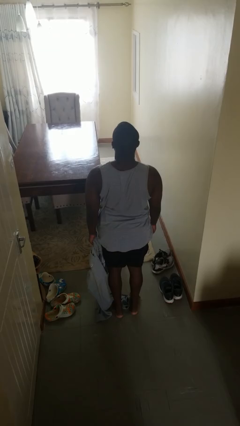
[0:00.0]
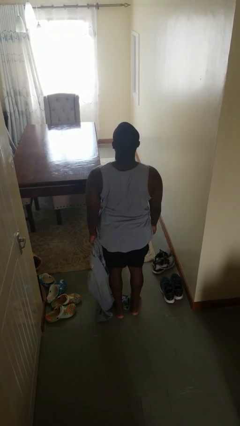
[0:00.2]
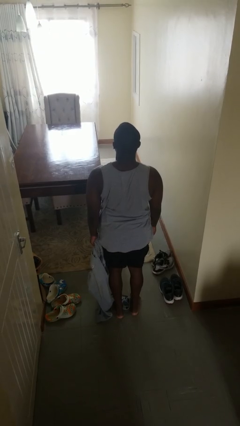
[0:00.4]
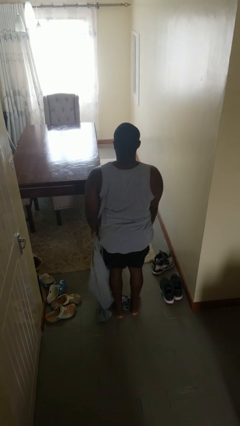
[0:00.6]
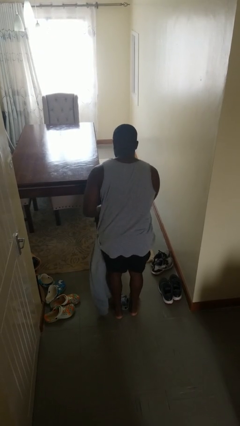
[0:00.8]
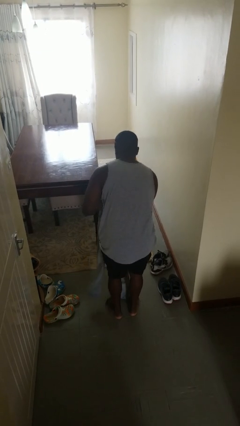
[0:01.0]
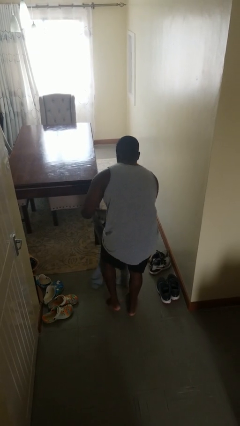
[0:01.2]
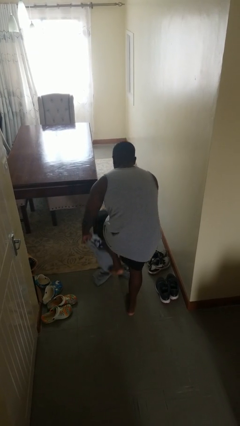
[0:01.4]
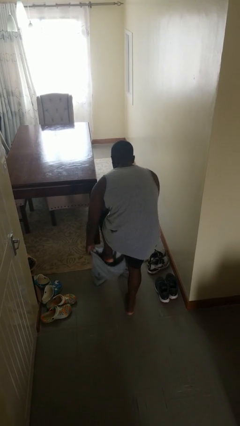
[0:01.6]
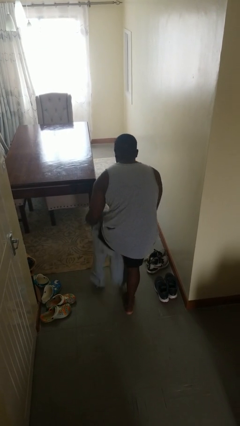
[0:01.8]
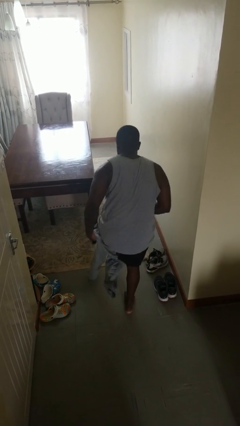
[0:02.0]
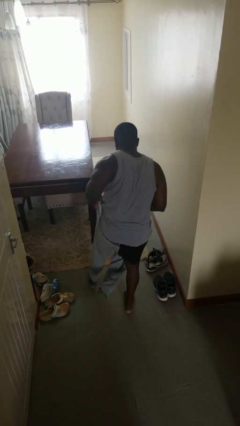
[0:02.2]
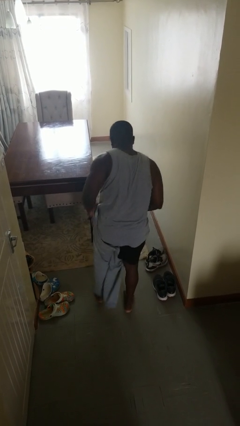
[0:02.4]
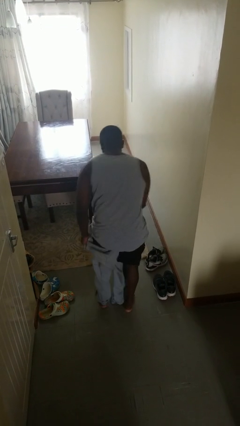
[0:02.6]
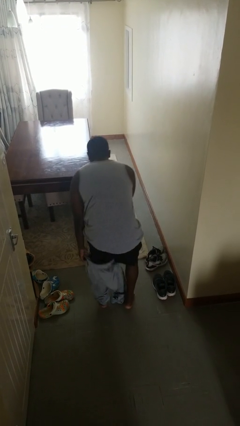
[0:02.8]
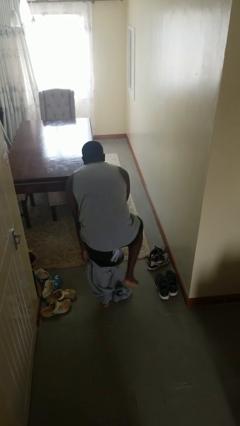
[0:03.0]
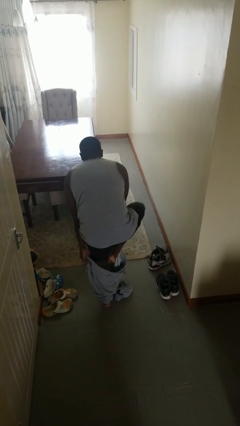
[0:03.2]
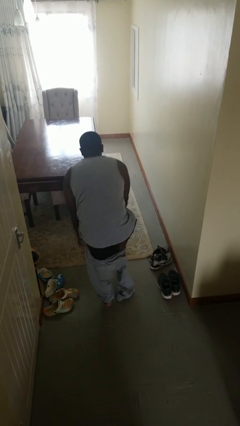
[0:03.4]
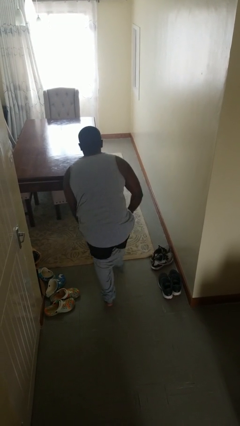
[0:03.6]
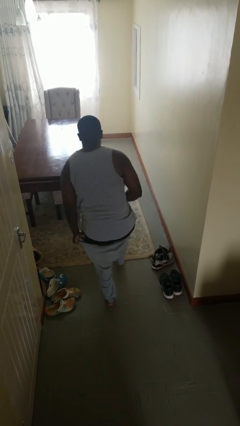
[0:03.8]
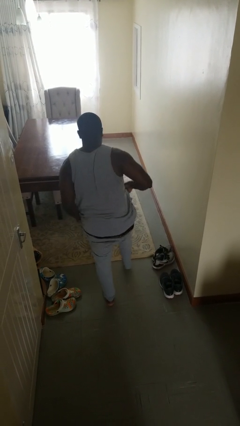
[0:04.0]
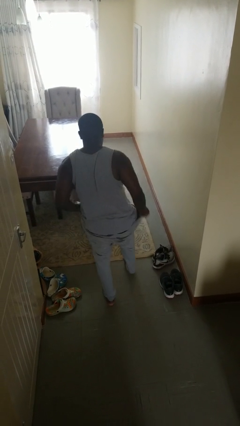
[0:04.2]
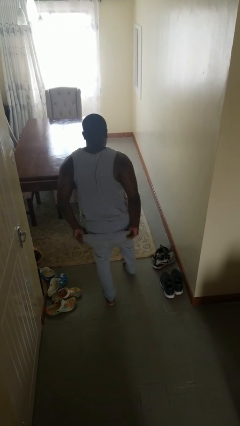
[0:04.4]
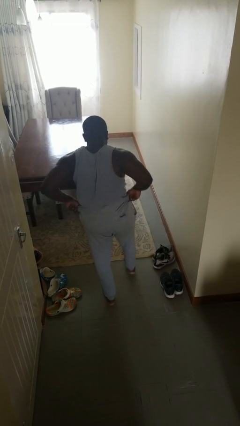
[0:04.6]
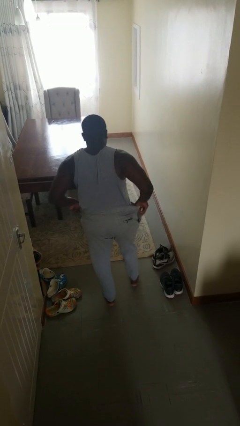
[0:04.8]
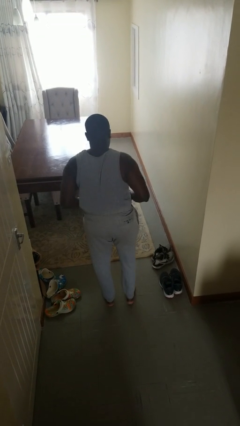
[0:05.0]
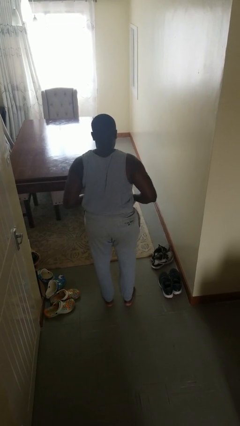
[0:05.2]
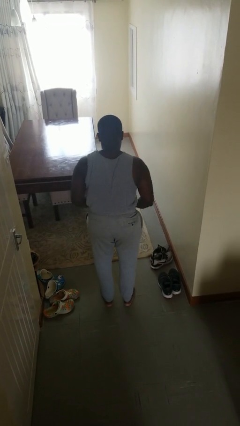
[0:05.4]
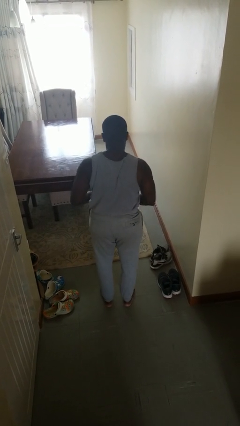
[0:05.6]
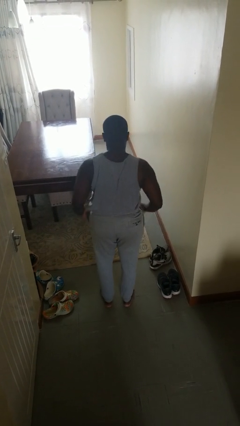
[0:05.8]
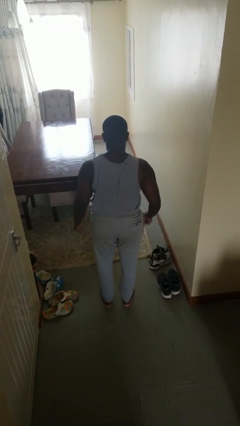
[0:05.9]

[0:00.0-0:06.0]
person puts on pants

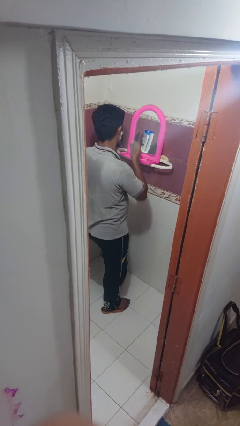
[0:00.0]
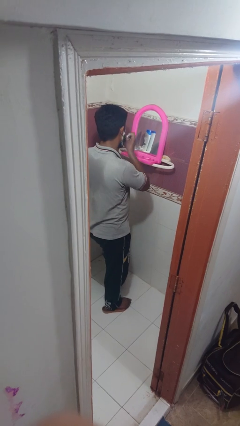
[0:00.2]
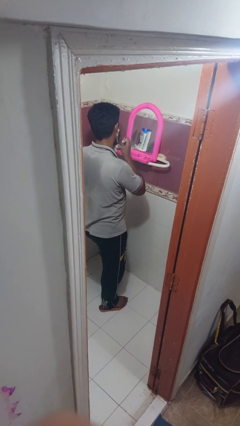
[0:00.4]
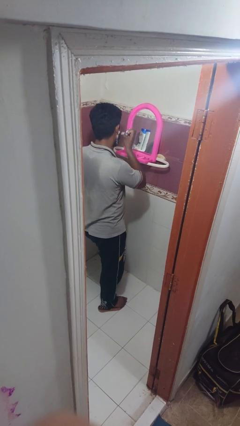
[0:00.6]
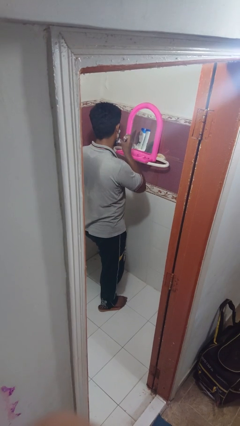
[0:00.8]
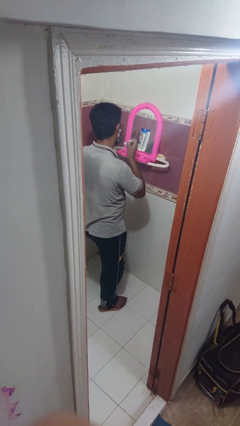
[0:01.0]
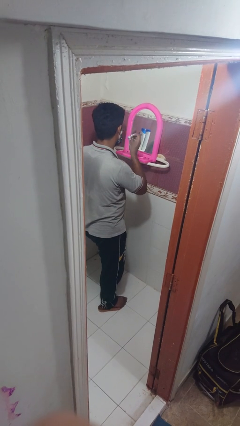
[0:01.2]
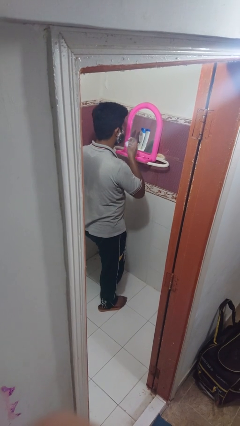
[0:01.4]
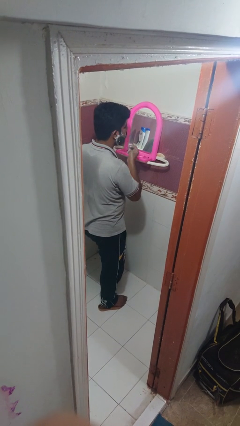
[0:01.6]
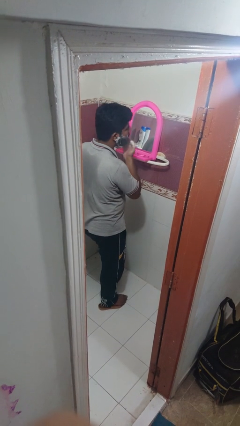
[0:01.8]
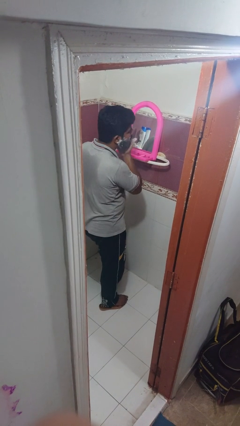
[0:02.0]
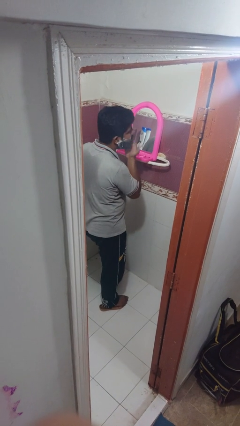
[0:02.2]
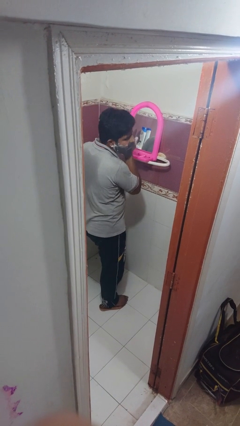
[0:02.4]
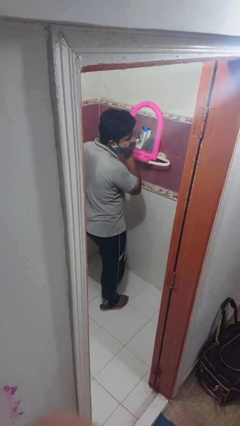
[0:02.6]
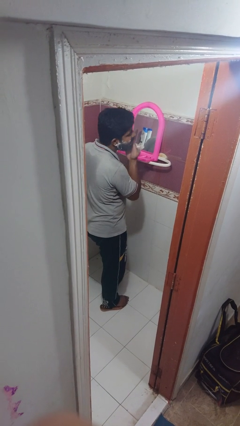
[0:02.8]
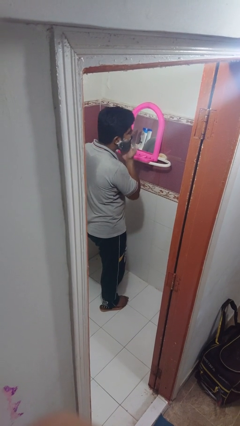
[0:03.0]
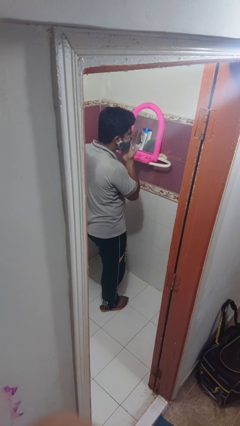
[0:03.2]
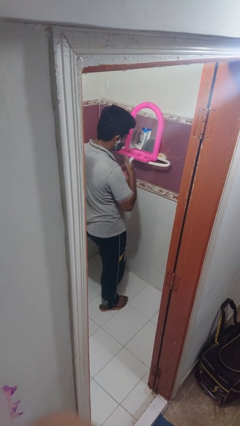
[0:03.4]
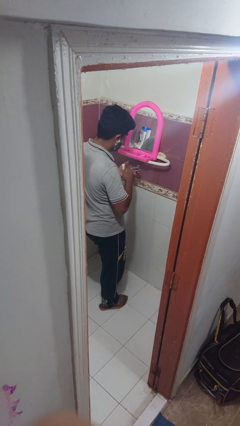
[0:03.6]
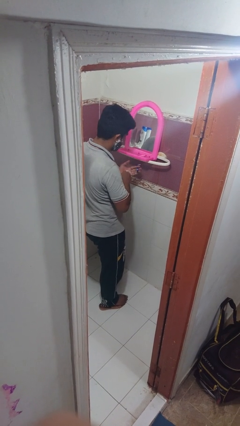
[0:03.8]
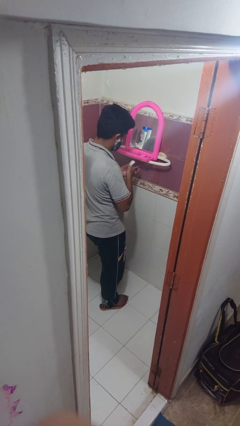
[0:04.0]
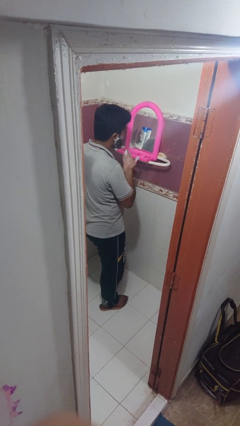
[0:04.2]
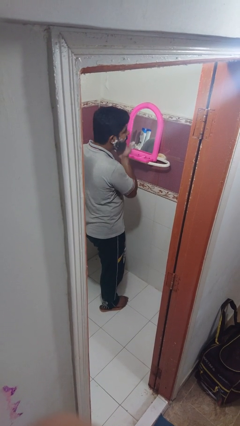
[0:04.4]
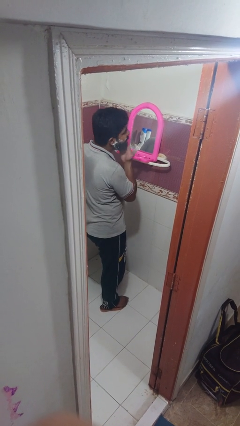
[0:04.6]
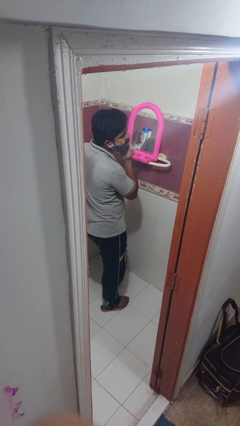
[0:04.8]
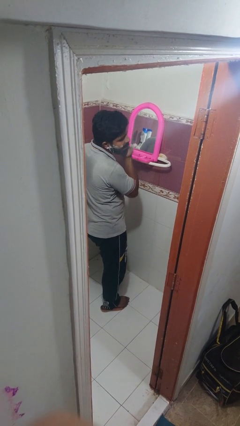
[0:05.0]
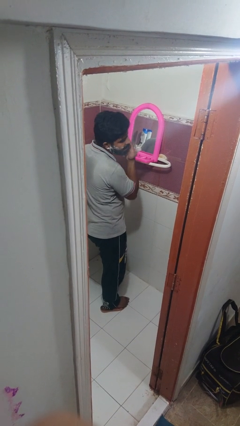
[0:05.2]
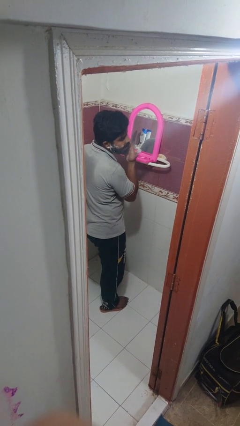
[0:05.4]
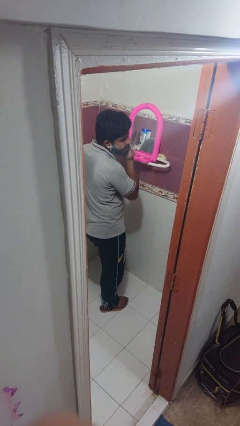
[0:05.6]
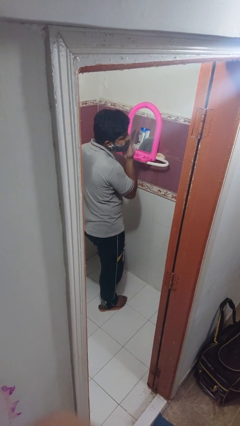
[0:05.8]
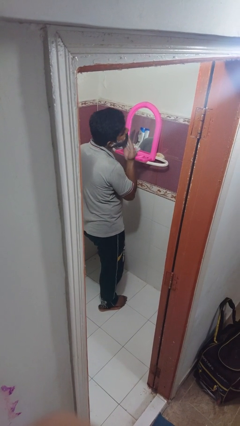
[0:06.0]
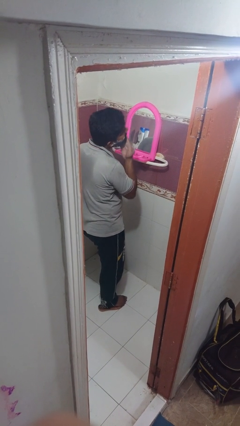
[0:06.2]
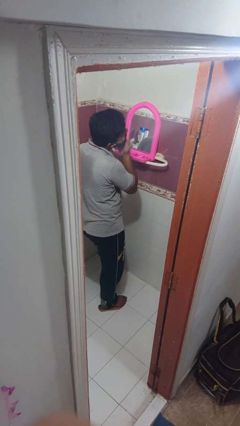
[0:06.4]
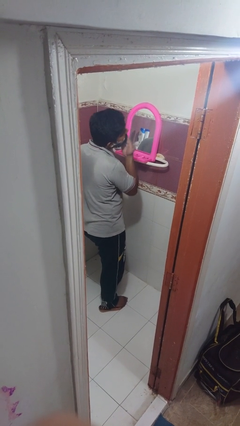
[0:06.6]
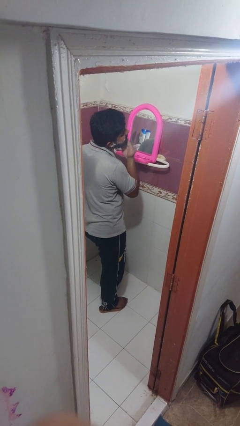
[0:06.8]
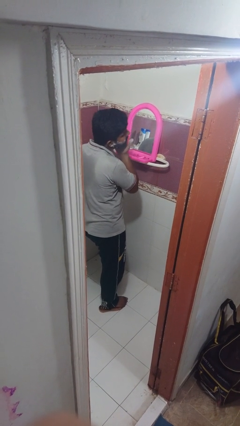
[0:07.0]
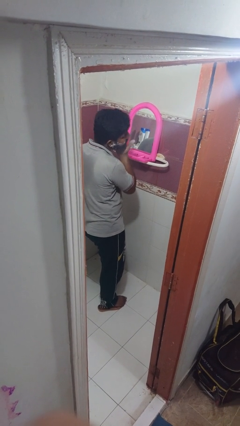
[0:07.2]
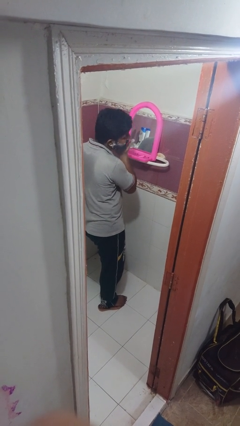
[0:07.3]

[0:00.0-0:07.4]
person applies shaving cream

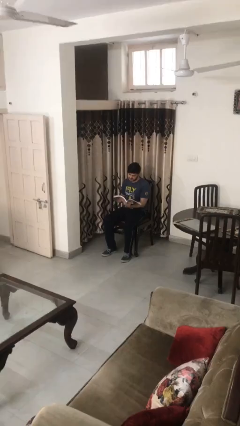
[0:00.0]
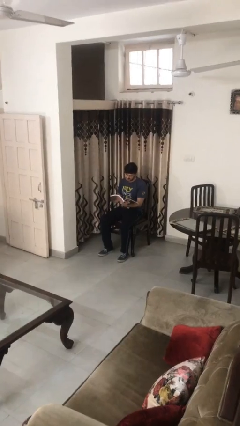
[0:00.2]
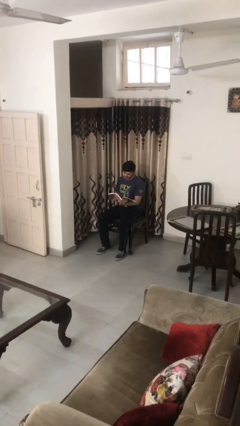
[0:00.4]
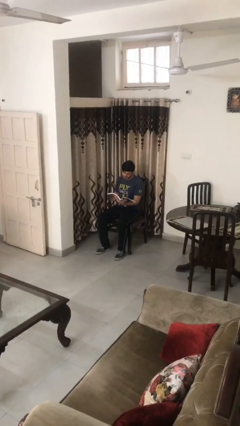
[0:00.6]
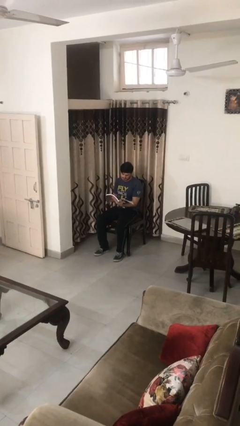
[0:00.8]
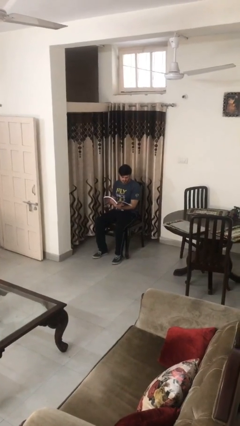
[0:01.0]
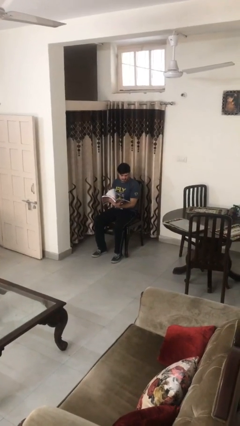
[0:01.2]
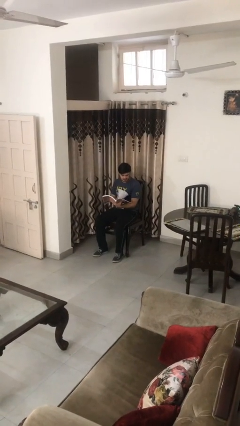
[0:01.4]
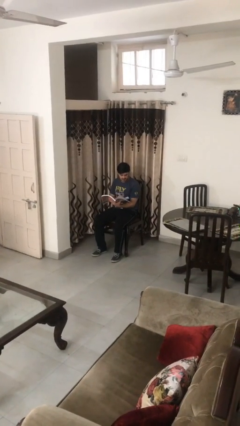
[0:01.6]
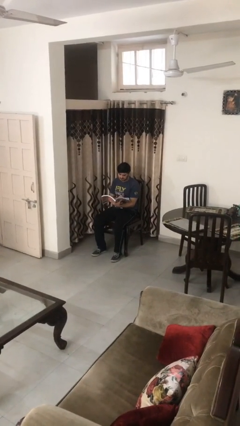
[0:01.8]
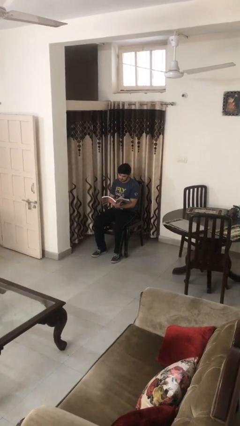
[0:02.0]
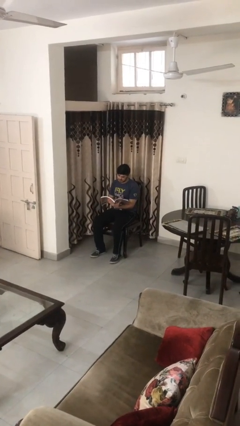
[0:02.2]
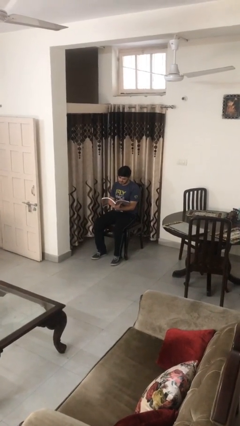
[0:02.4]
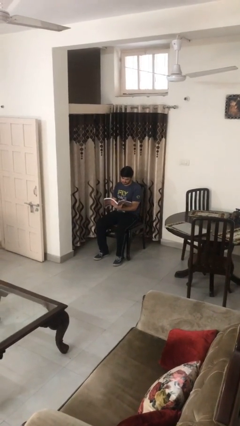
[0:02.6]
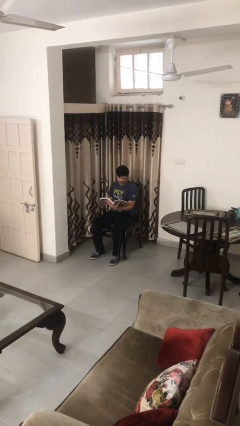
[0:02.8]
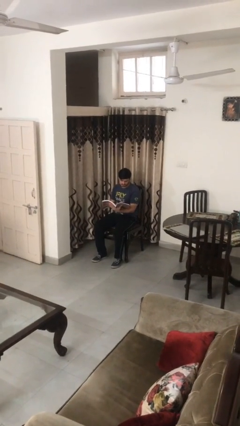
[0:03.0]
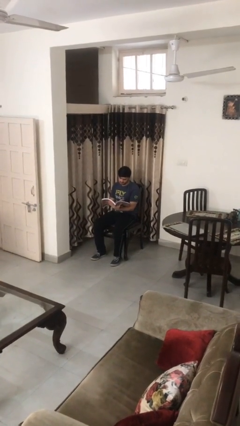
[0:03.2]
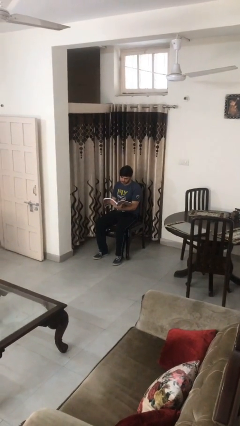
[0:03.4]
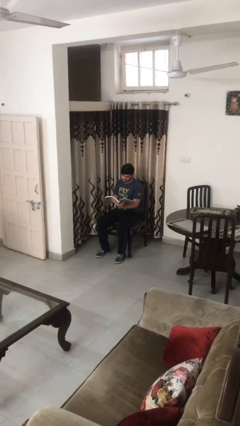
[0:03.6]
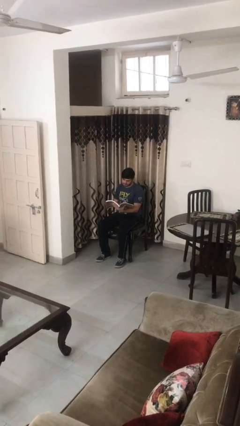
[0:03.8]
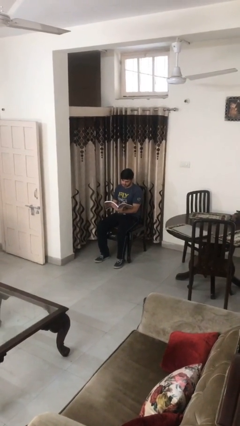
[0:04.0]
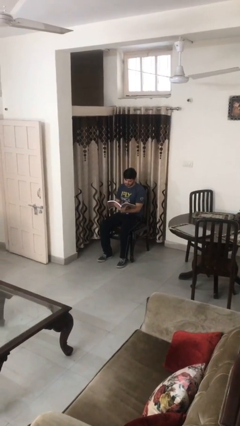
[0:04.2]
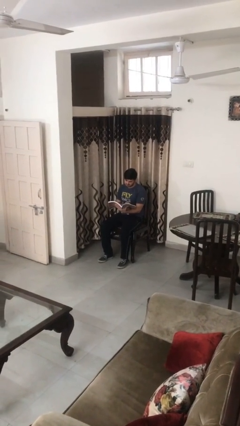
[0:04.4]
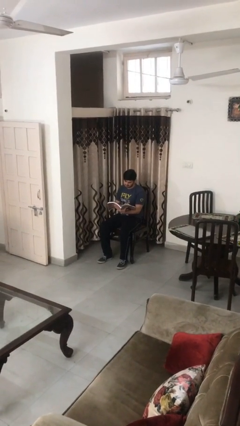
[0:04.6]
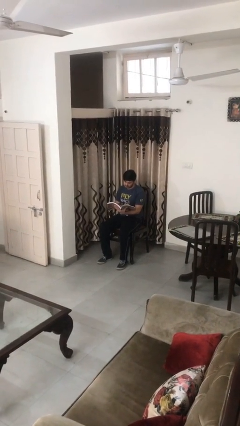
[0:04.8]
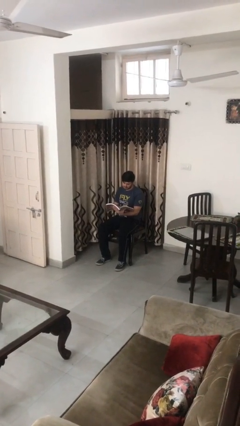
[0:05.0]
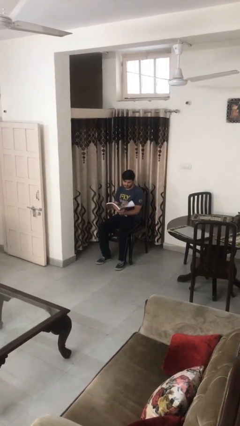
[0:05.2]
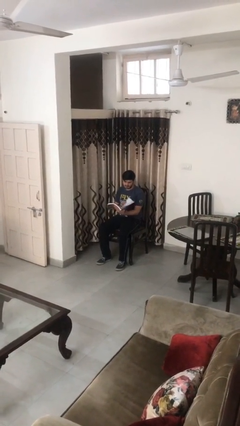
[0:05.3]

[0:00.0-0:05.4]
person reads document
